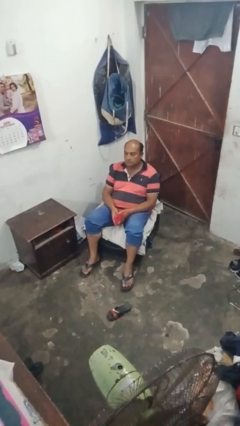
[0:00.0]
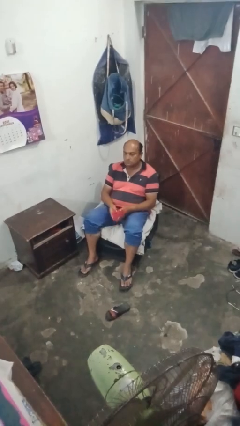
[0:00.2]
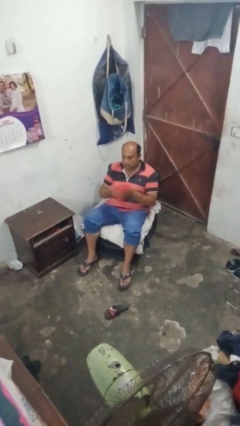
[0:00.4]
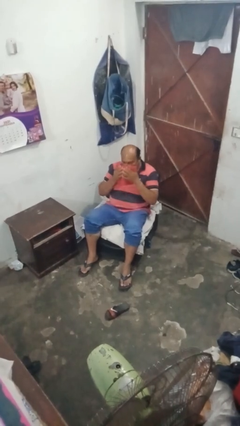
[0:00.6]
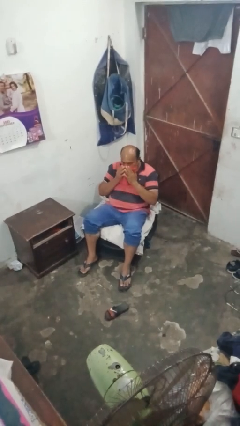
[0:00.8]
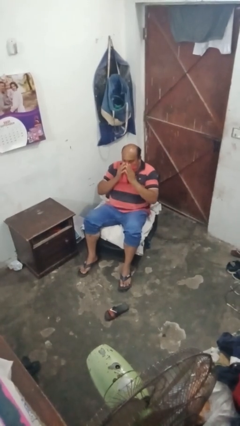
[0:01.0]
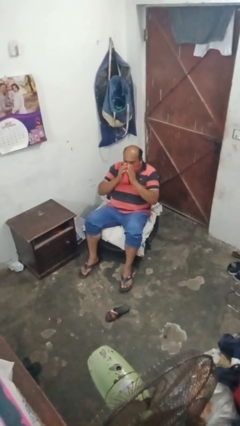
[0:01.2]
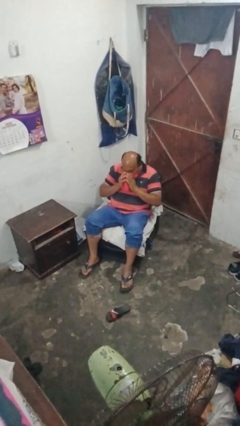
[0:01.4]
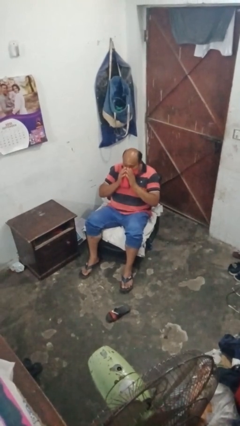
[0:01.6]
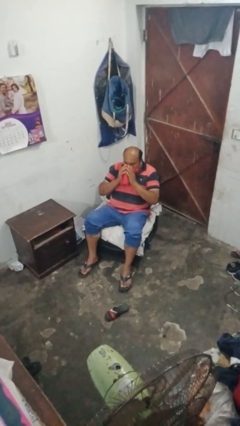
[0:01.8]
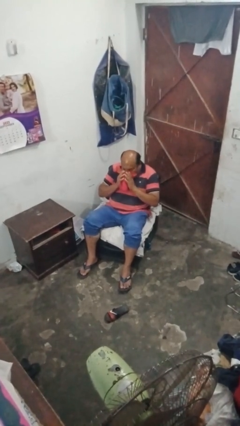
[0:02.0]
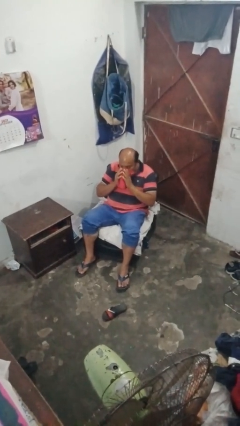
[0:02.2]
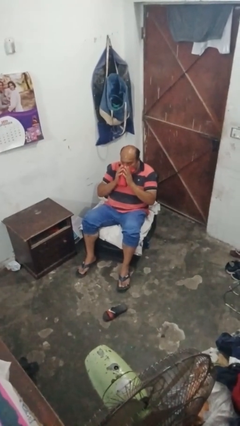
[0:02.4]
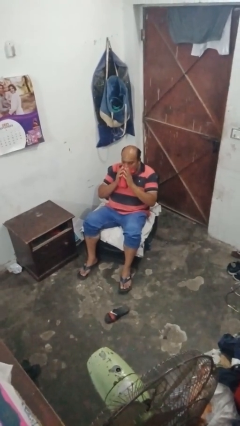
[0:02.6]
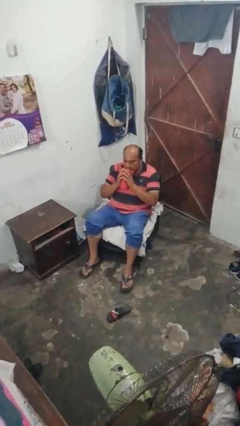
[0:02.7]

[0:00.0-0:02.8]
person blows nose

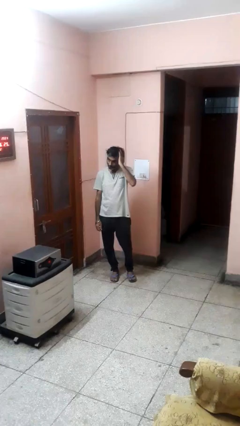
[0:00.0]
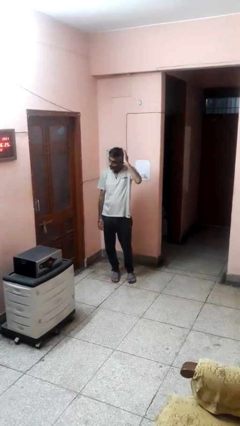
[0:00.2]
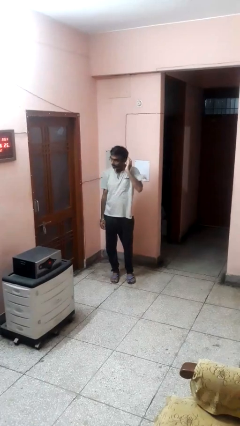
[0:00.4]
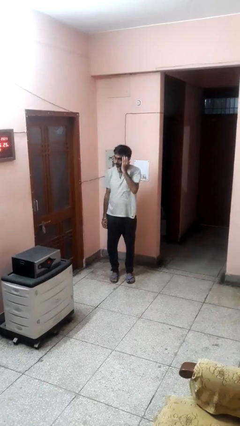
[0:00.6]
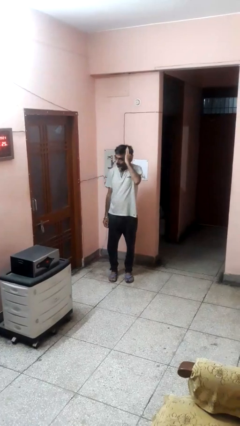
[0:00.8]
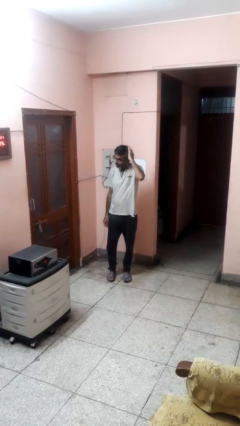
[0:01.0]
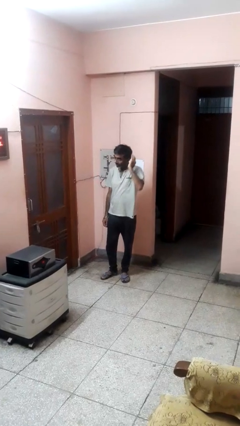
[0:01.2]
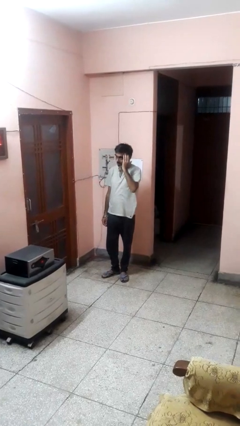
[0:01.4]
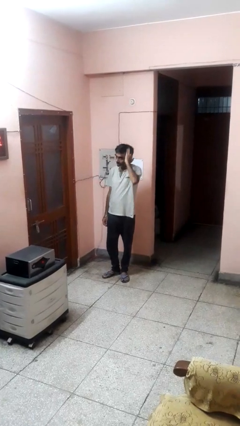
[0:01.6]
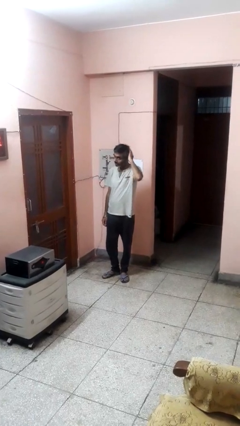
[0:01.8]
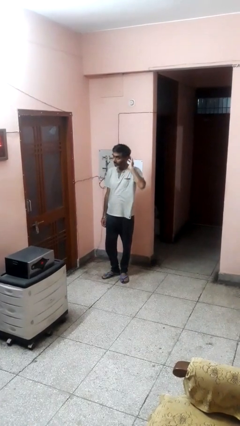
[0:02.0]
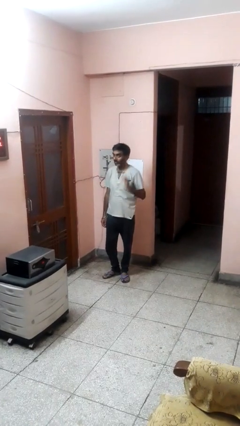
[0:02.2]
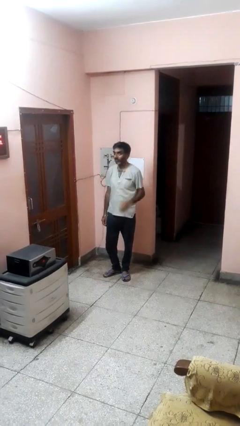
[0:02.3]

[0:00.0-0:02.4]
person strokes hair

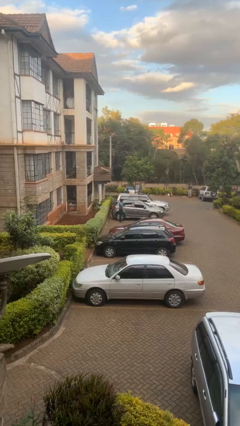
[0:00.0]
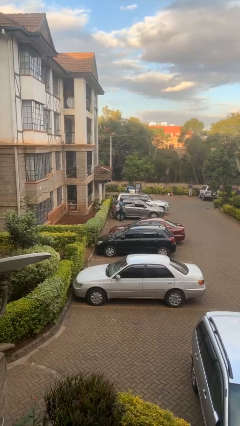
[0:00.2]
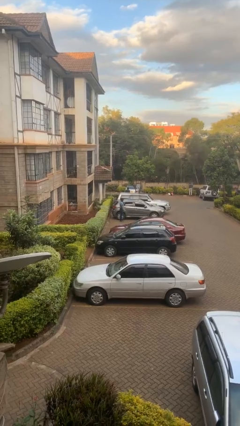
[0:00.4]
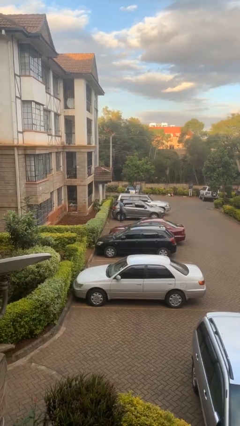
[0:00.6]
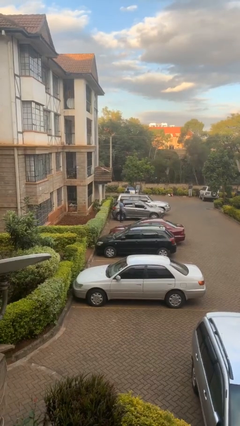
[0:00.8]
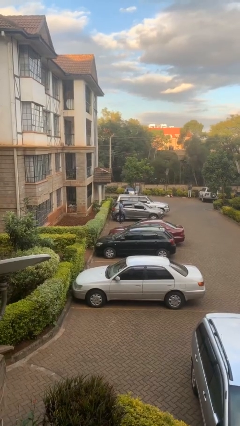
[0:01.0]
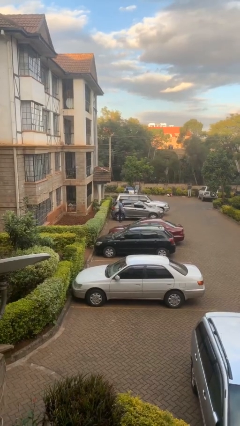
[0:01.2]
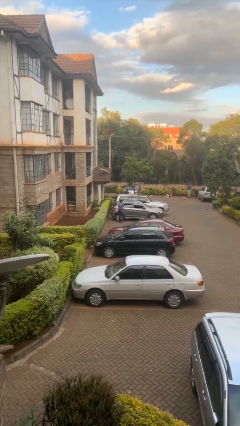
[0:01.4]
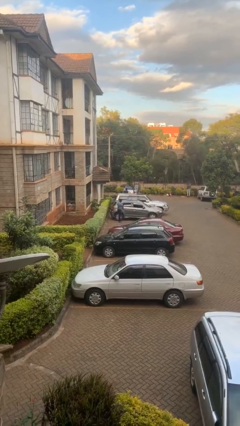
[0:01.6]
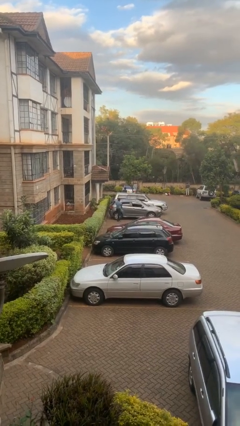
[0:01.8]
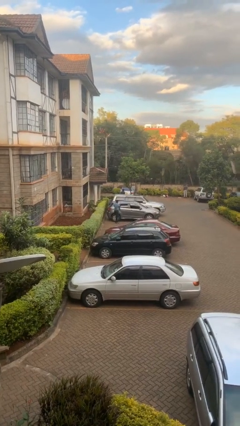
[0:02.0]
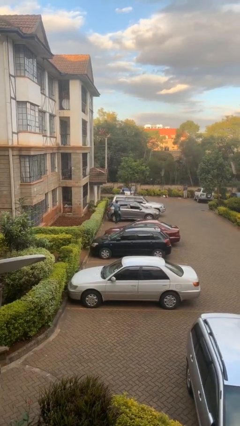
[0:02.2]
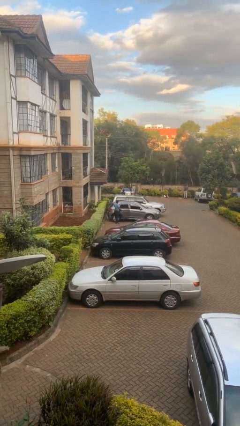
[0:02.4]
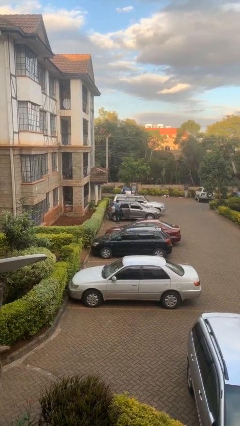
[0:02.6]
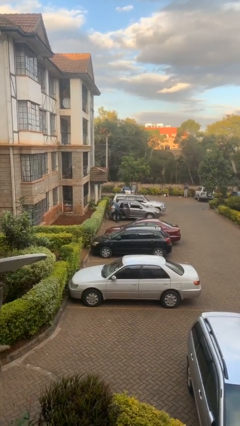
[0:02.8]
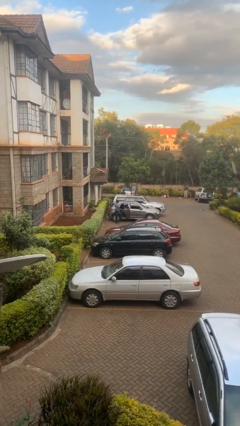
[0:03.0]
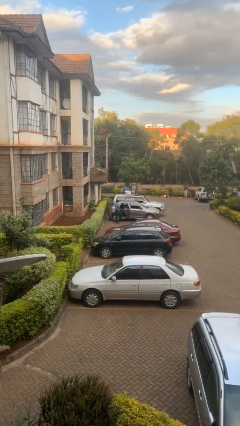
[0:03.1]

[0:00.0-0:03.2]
person opens car door

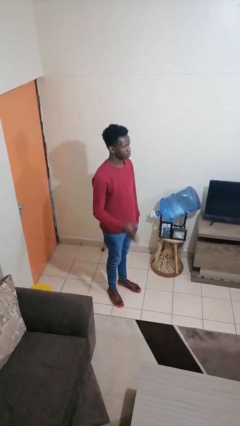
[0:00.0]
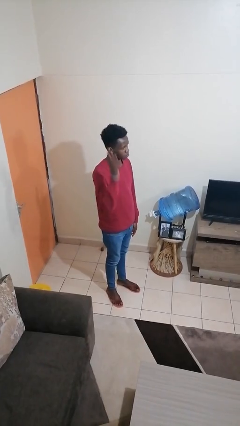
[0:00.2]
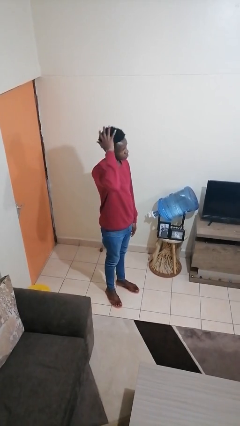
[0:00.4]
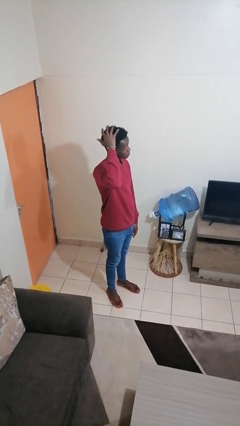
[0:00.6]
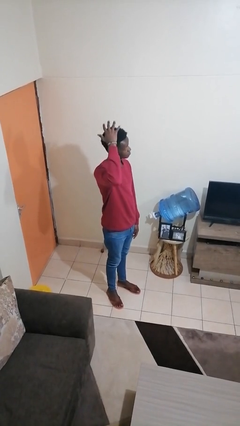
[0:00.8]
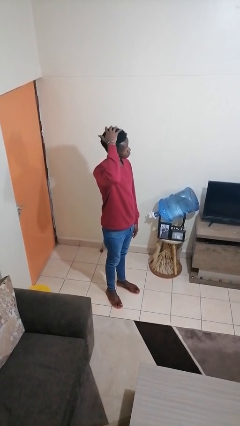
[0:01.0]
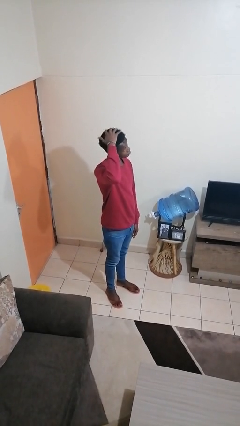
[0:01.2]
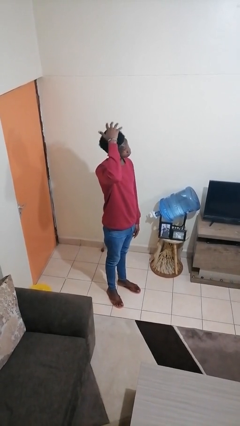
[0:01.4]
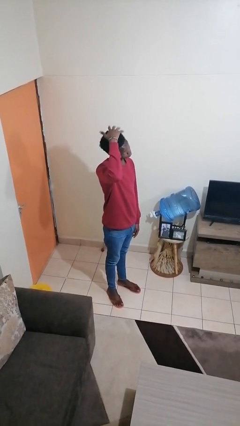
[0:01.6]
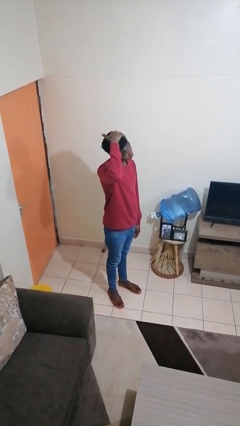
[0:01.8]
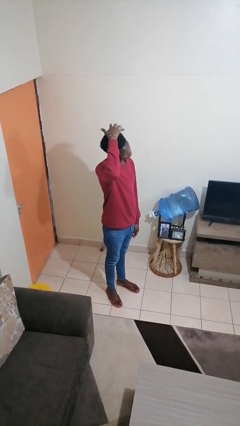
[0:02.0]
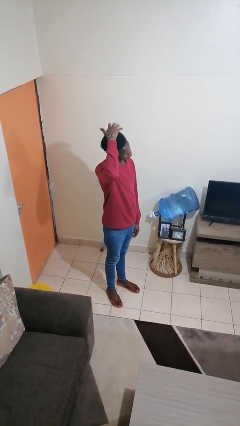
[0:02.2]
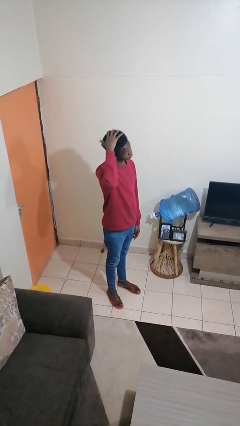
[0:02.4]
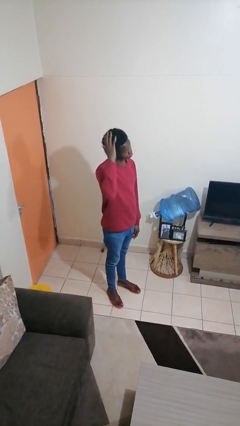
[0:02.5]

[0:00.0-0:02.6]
person pats head

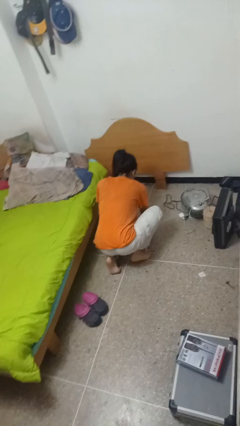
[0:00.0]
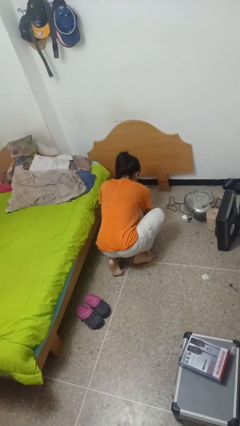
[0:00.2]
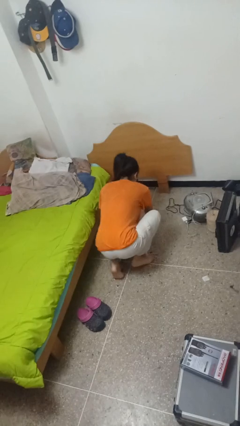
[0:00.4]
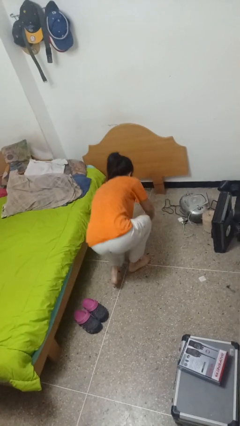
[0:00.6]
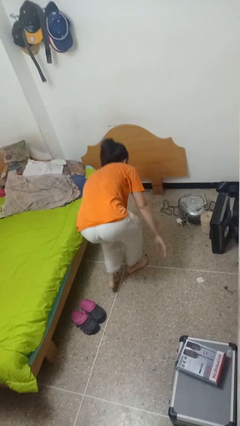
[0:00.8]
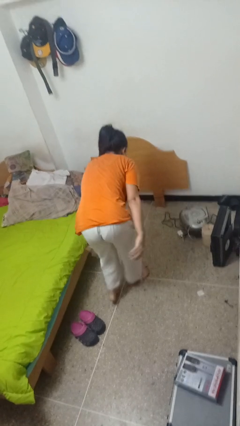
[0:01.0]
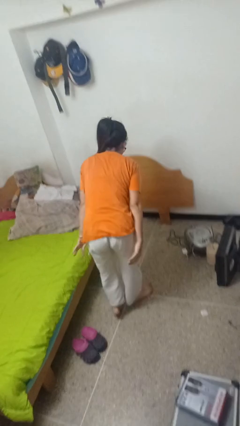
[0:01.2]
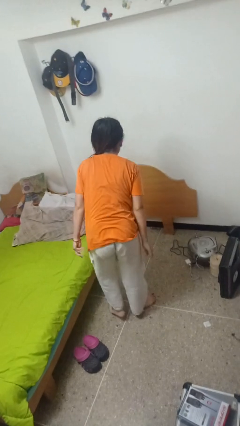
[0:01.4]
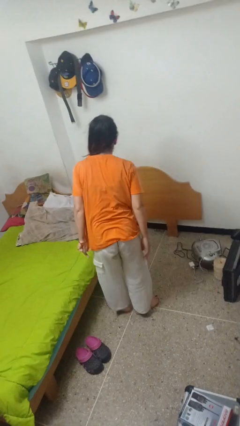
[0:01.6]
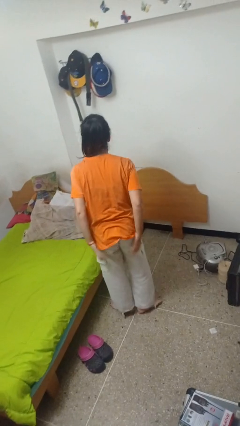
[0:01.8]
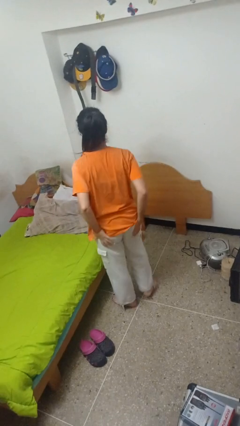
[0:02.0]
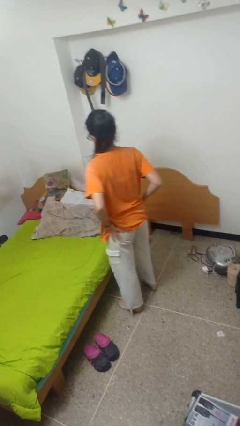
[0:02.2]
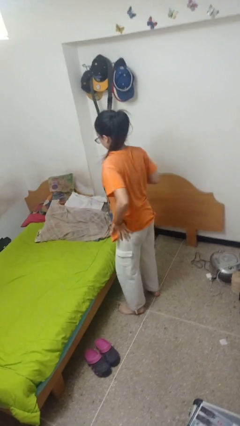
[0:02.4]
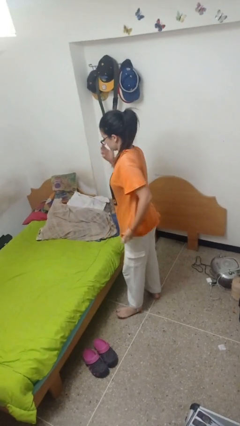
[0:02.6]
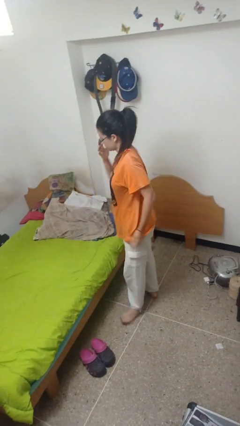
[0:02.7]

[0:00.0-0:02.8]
person stands up from floor

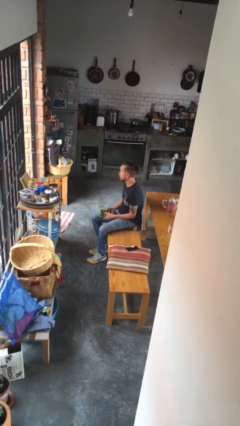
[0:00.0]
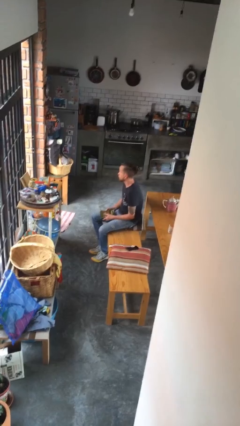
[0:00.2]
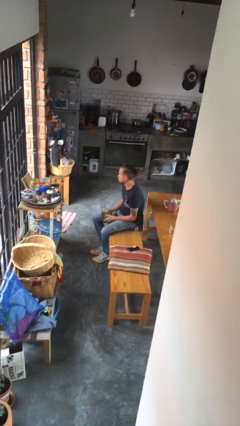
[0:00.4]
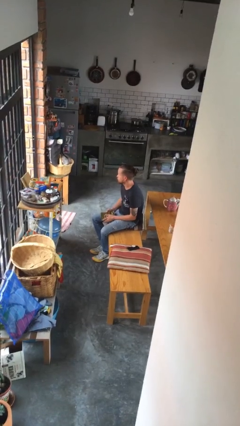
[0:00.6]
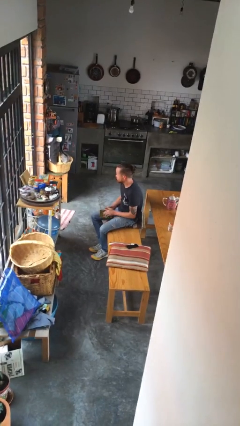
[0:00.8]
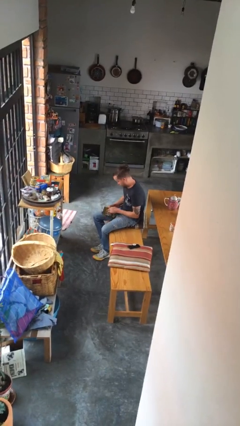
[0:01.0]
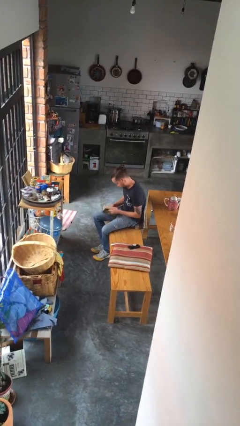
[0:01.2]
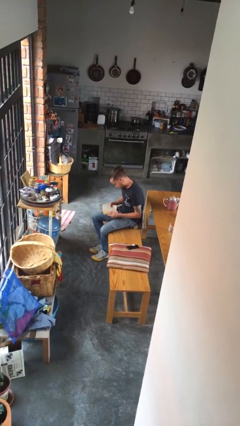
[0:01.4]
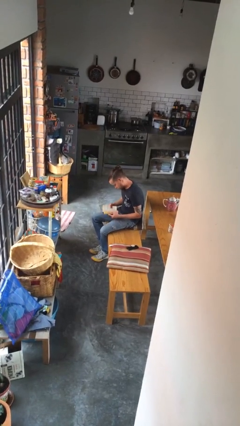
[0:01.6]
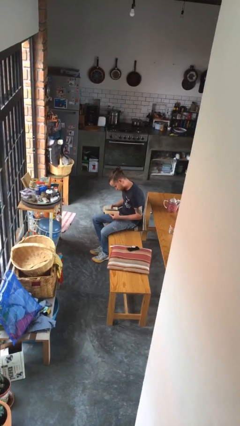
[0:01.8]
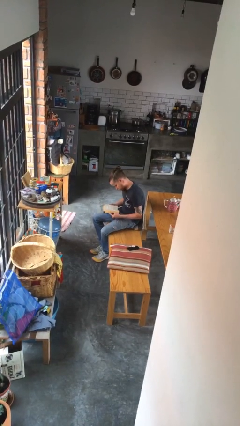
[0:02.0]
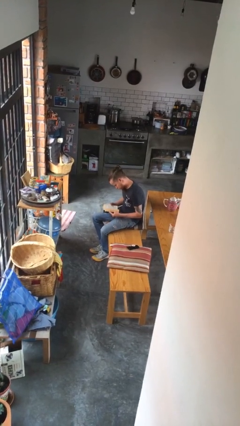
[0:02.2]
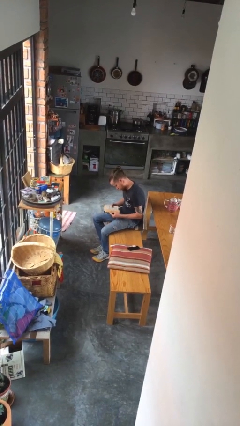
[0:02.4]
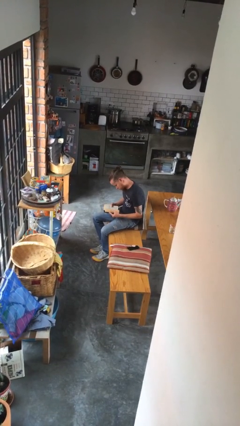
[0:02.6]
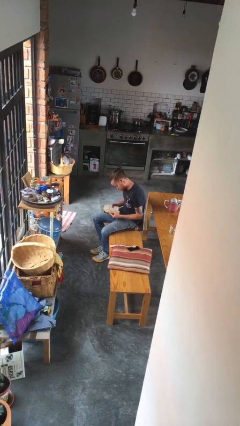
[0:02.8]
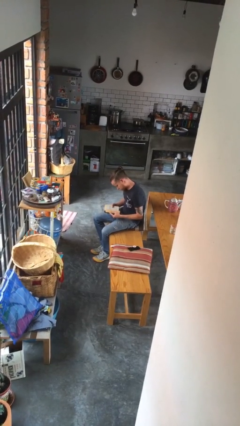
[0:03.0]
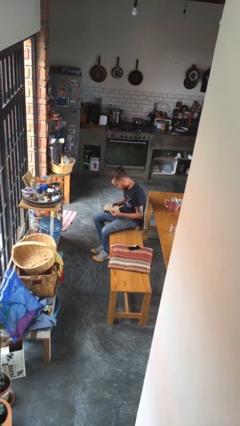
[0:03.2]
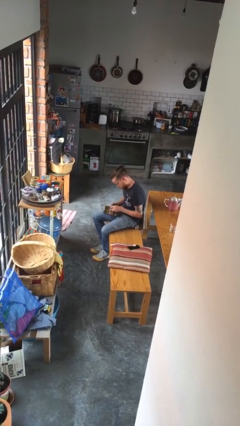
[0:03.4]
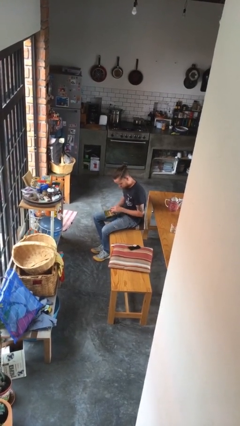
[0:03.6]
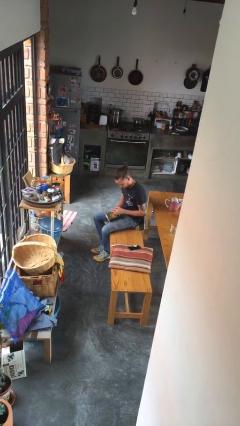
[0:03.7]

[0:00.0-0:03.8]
person reads book

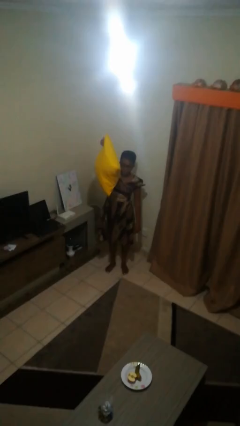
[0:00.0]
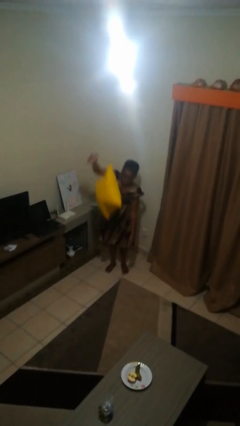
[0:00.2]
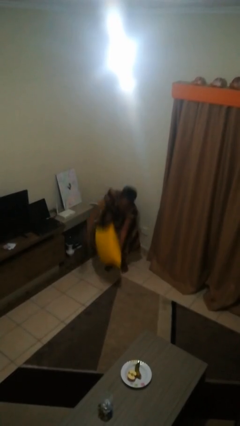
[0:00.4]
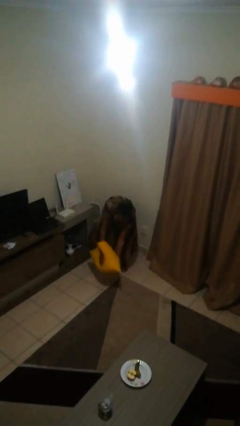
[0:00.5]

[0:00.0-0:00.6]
person drops object
